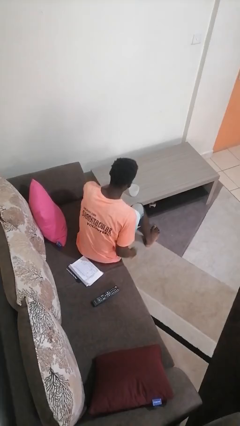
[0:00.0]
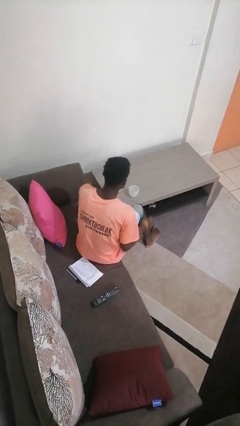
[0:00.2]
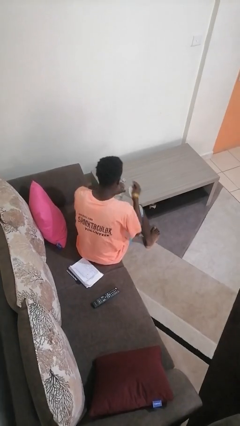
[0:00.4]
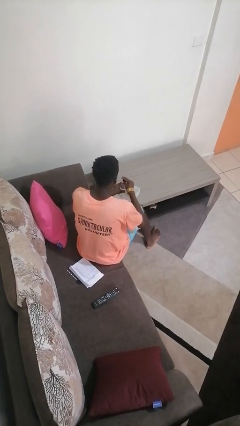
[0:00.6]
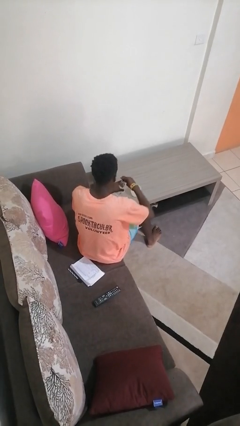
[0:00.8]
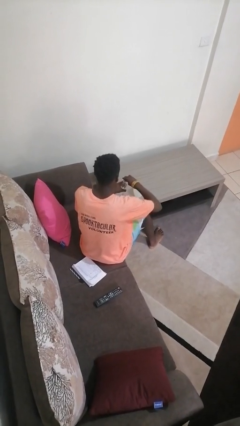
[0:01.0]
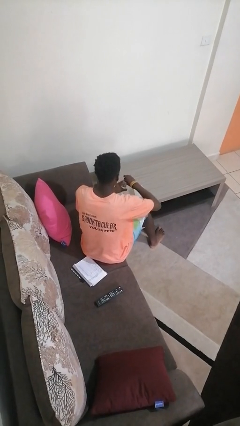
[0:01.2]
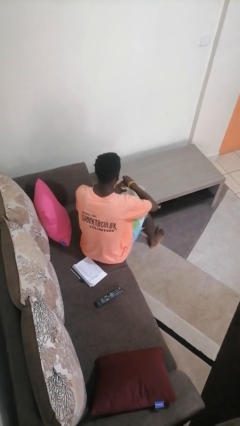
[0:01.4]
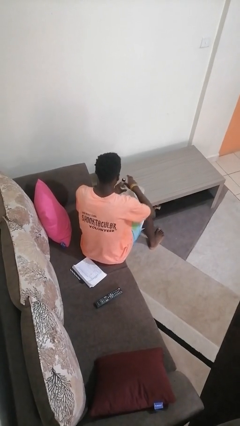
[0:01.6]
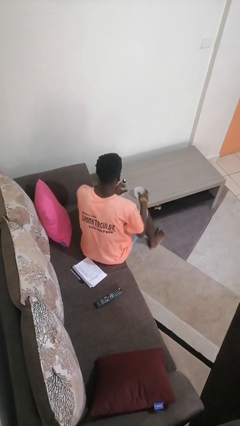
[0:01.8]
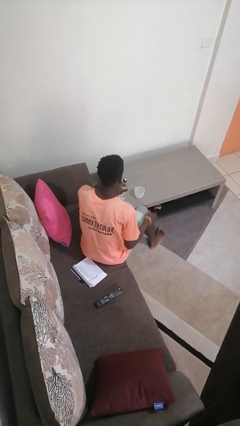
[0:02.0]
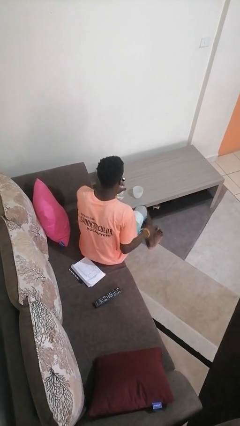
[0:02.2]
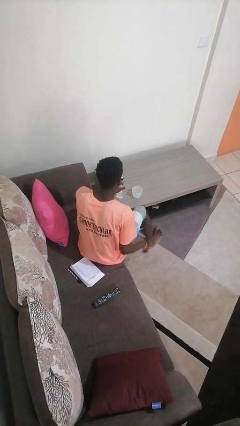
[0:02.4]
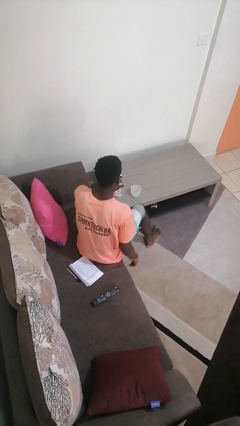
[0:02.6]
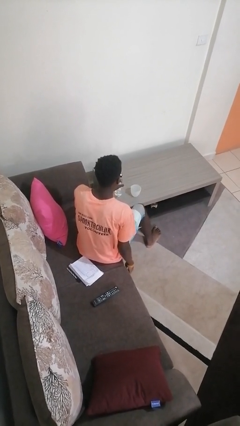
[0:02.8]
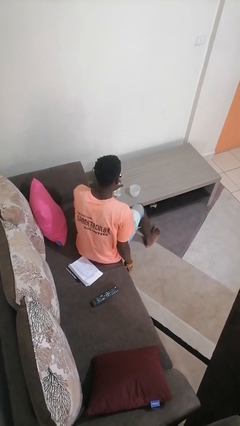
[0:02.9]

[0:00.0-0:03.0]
person screws lid to bottle

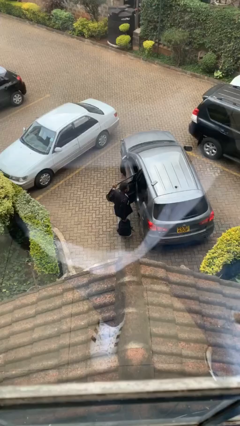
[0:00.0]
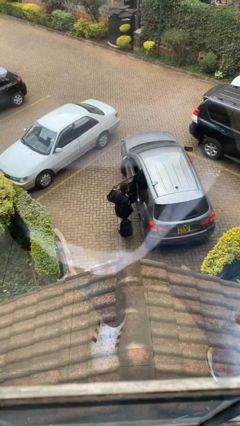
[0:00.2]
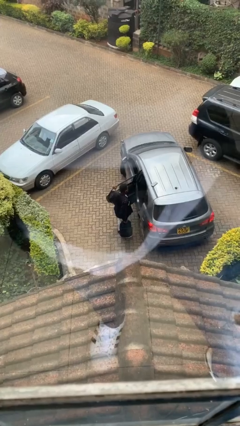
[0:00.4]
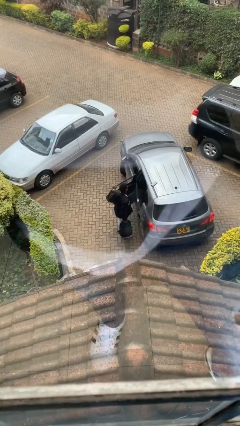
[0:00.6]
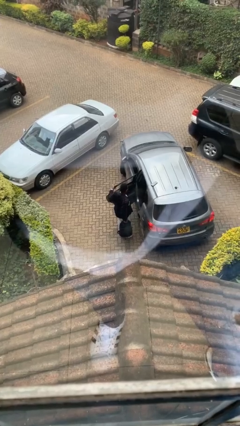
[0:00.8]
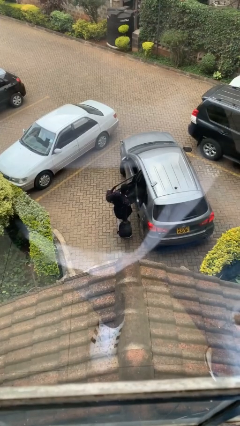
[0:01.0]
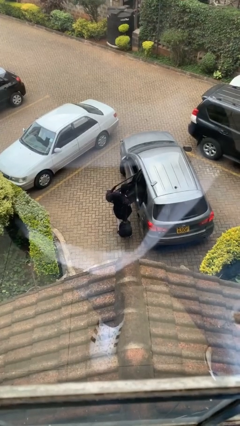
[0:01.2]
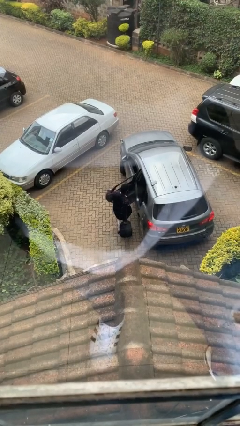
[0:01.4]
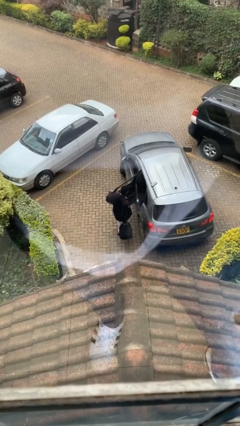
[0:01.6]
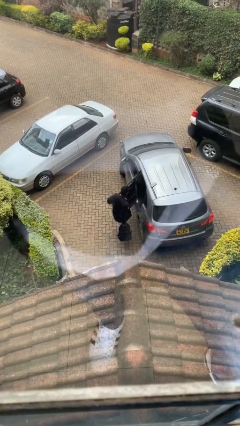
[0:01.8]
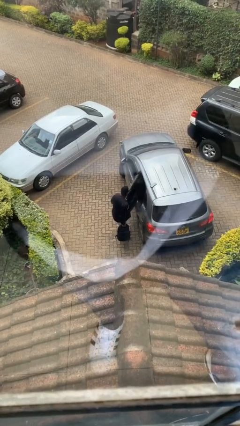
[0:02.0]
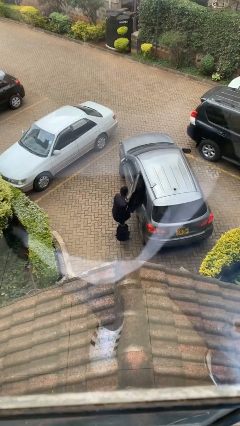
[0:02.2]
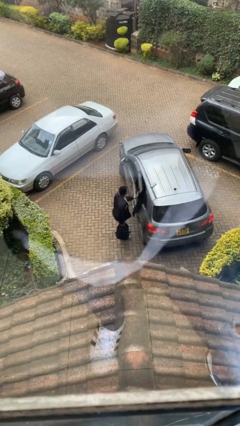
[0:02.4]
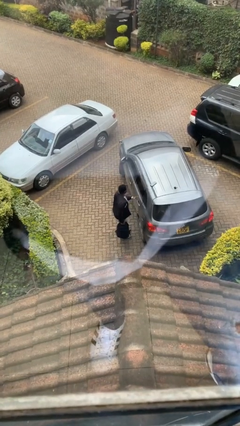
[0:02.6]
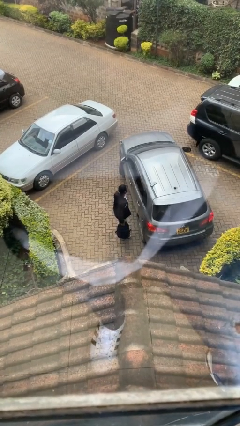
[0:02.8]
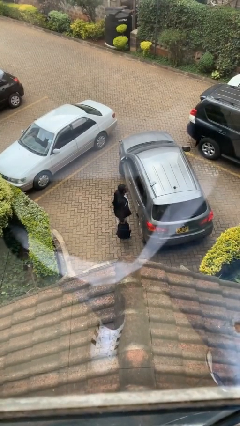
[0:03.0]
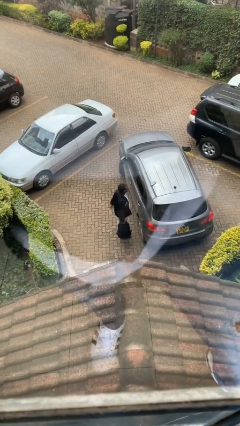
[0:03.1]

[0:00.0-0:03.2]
person closes car door

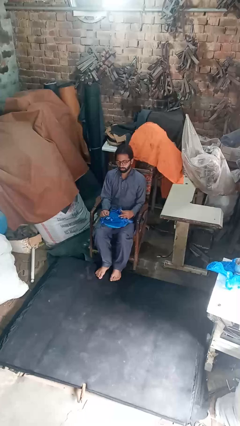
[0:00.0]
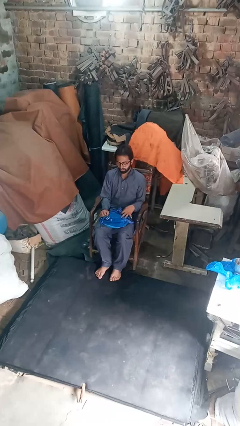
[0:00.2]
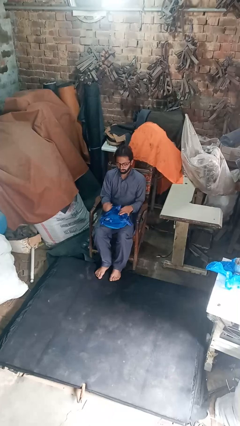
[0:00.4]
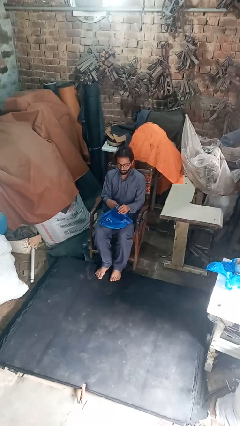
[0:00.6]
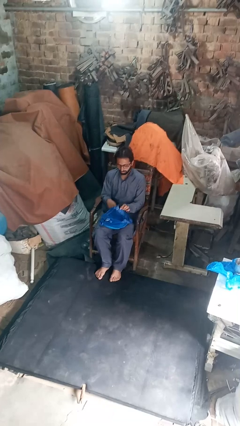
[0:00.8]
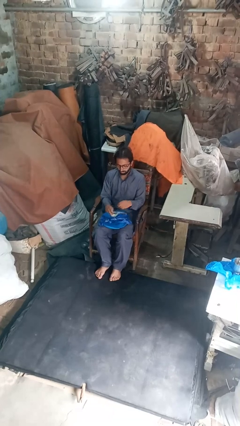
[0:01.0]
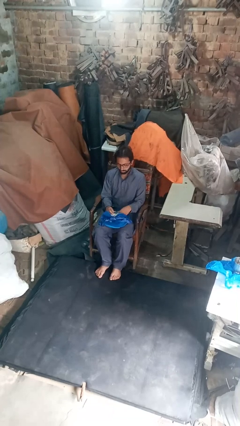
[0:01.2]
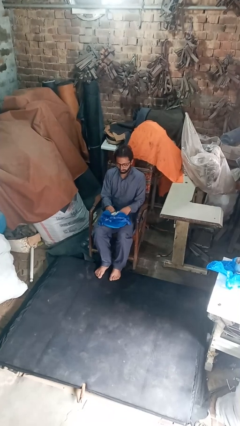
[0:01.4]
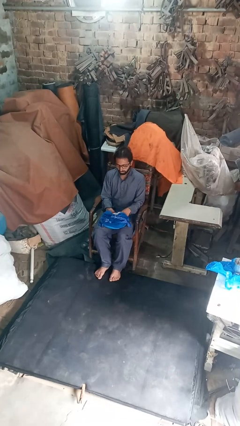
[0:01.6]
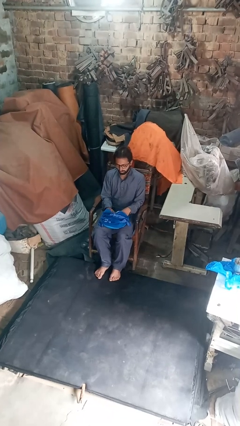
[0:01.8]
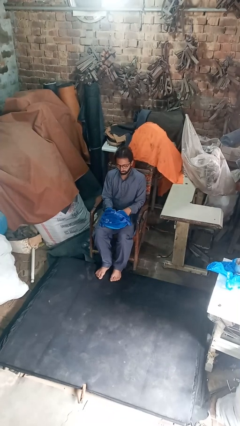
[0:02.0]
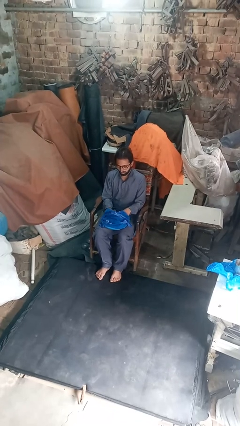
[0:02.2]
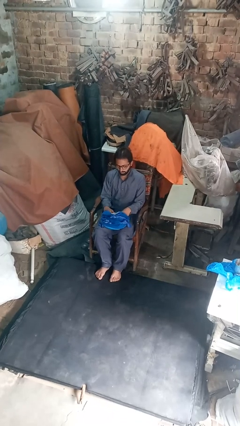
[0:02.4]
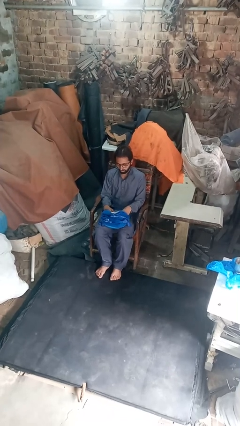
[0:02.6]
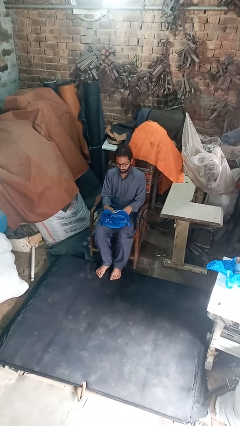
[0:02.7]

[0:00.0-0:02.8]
person searches in backpack

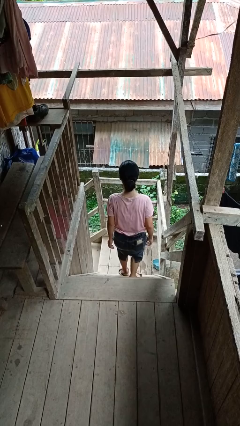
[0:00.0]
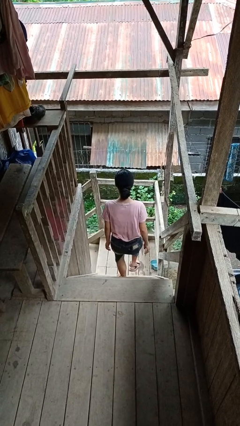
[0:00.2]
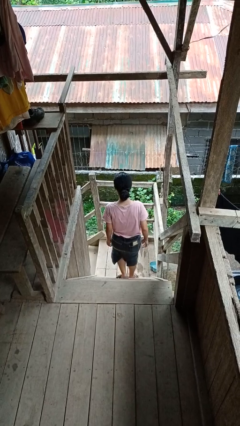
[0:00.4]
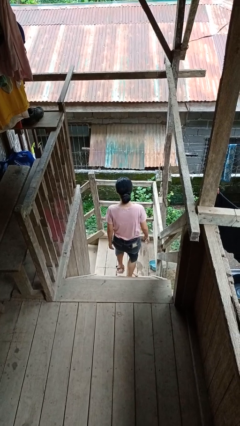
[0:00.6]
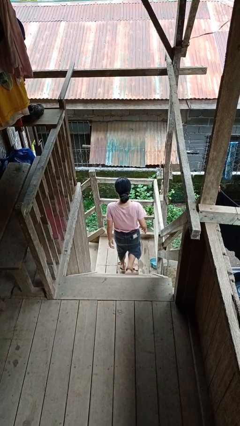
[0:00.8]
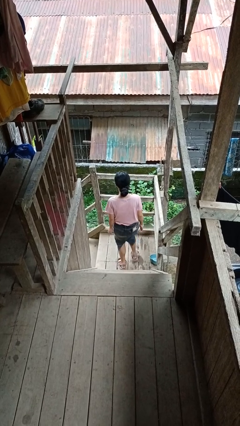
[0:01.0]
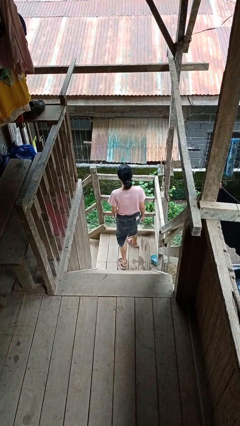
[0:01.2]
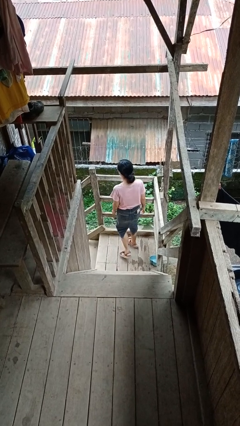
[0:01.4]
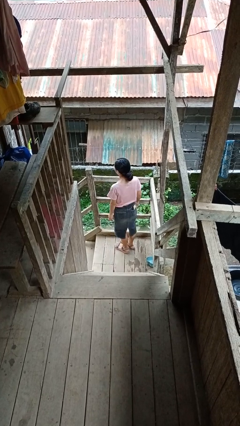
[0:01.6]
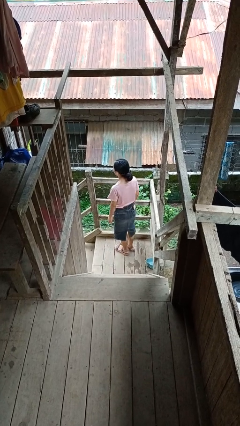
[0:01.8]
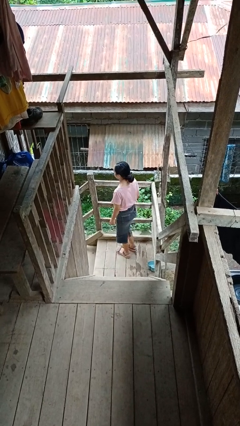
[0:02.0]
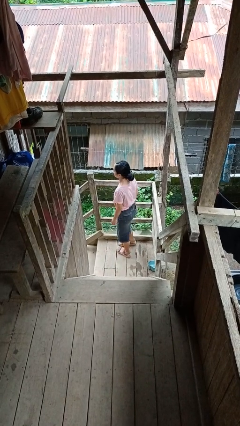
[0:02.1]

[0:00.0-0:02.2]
person climbs down stairs

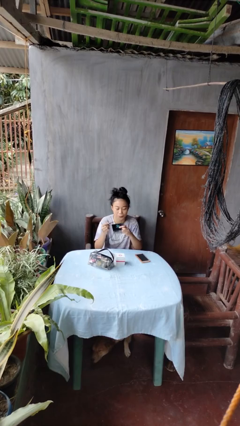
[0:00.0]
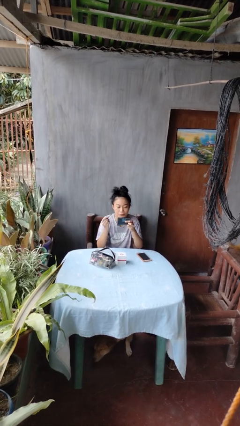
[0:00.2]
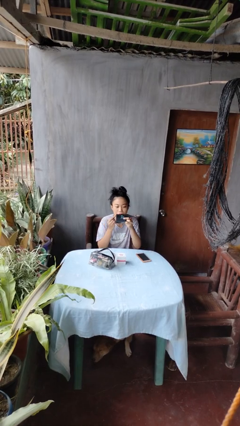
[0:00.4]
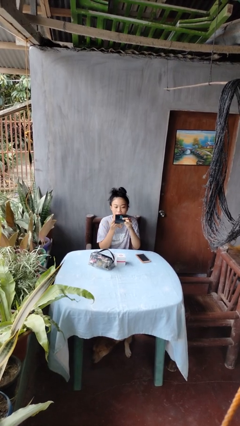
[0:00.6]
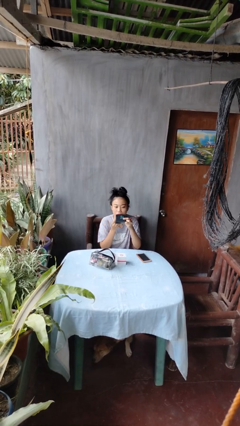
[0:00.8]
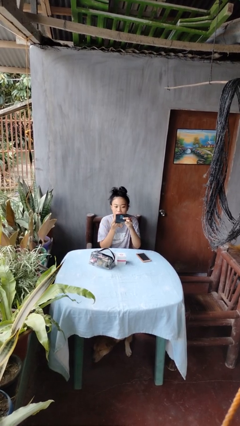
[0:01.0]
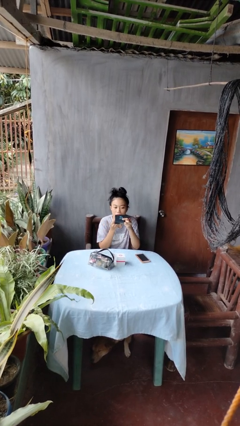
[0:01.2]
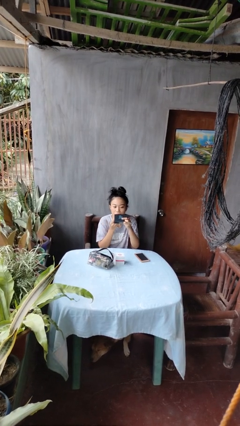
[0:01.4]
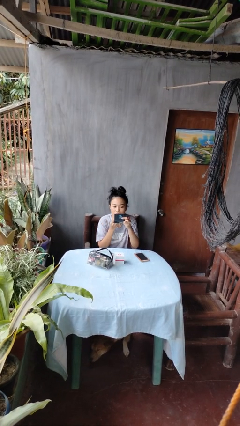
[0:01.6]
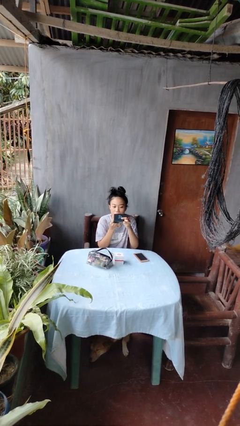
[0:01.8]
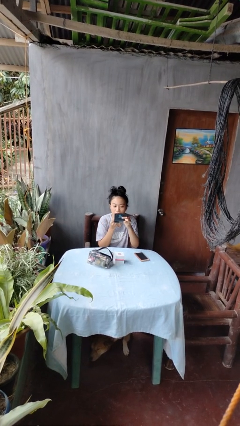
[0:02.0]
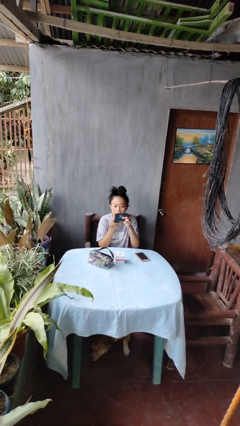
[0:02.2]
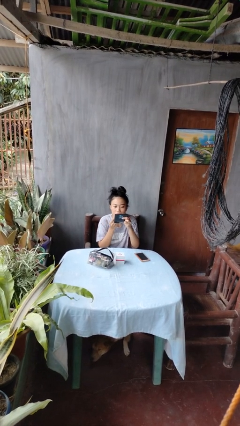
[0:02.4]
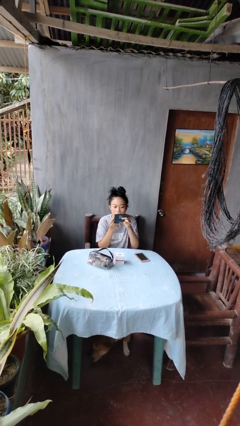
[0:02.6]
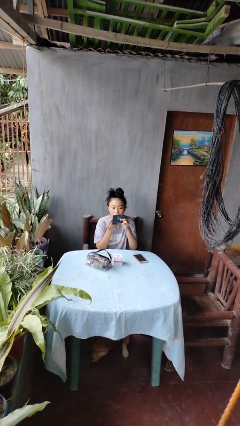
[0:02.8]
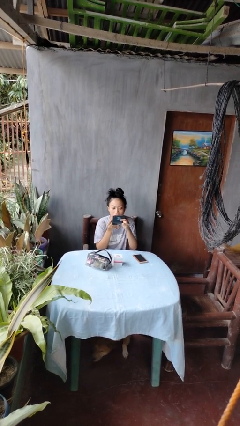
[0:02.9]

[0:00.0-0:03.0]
person applies lip makeup

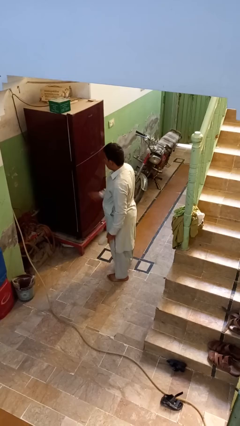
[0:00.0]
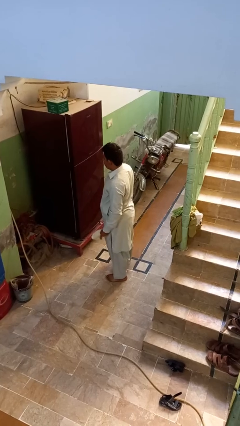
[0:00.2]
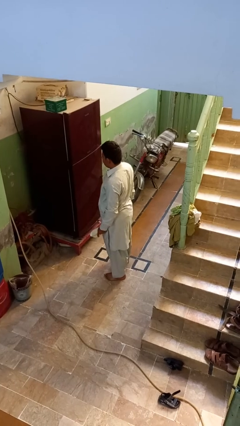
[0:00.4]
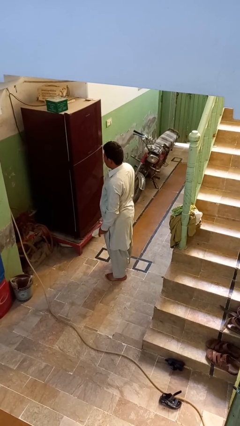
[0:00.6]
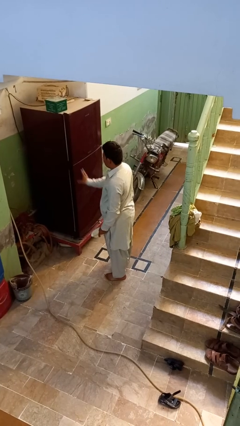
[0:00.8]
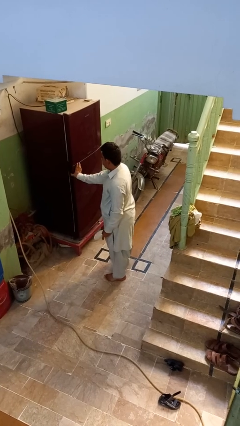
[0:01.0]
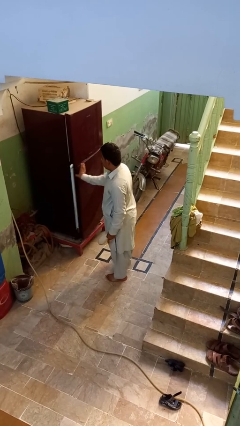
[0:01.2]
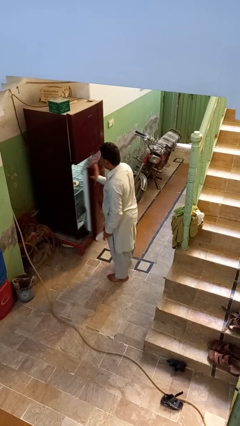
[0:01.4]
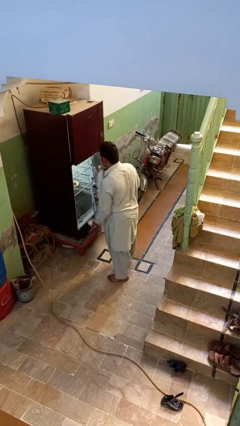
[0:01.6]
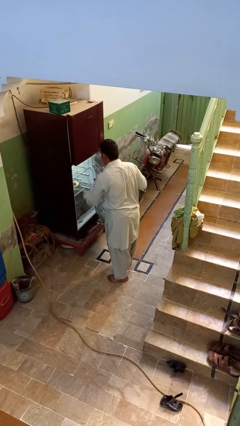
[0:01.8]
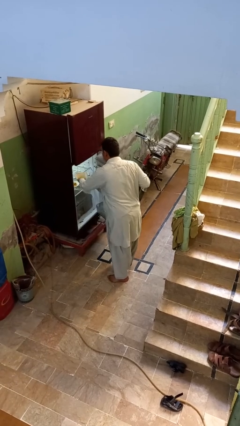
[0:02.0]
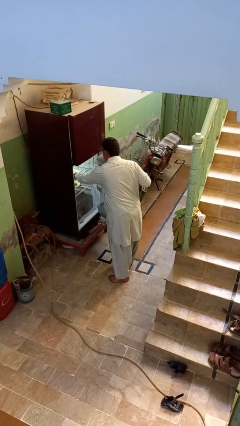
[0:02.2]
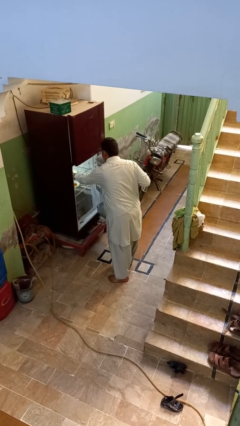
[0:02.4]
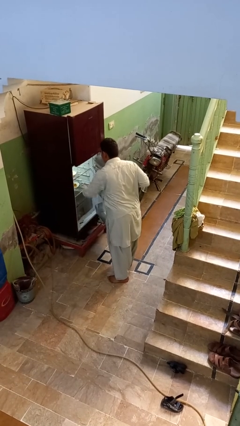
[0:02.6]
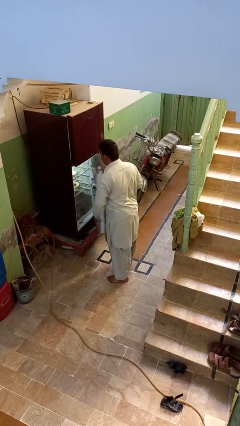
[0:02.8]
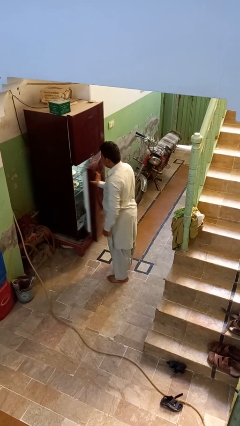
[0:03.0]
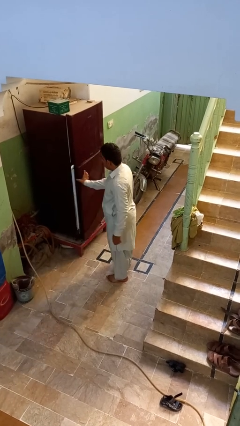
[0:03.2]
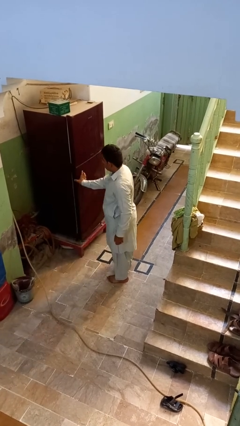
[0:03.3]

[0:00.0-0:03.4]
person puts object into refrigerator
